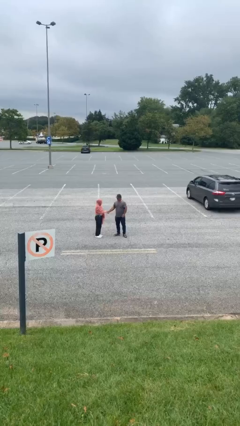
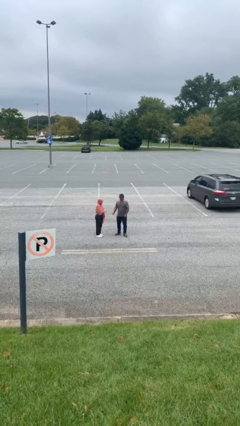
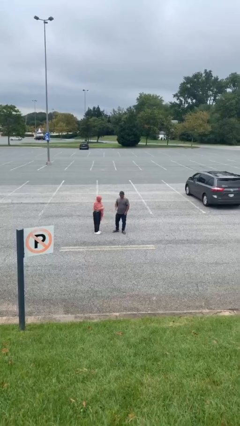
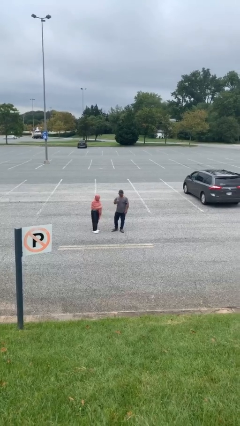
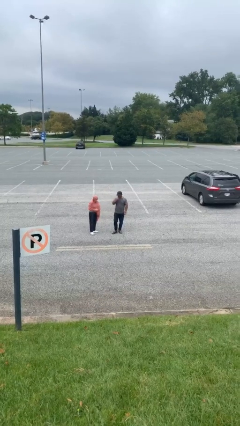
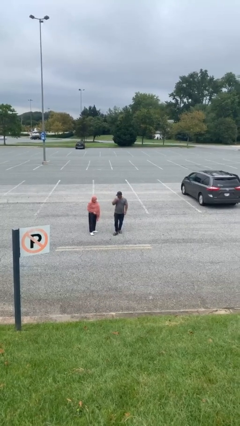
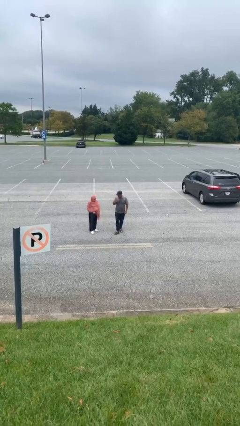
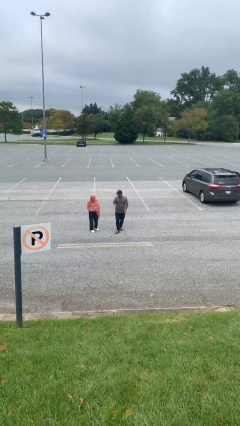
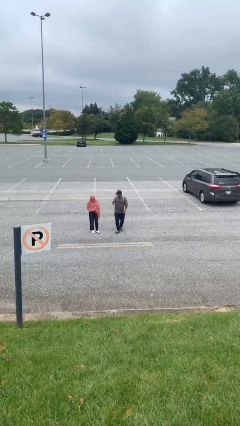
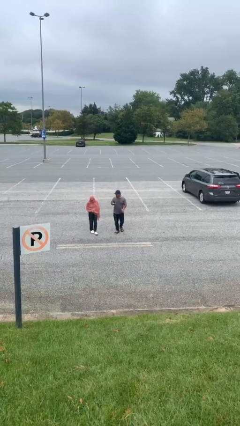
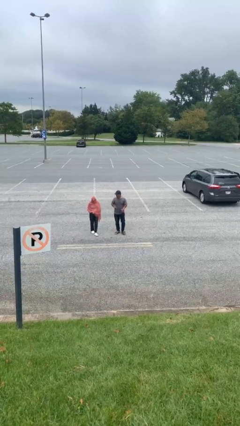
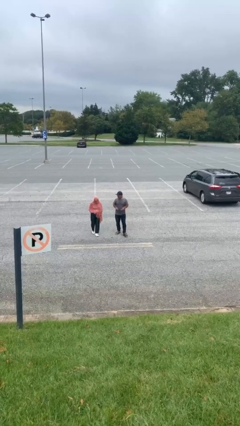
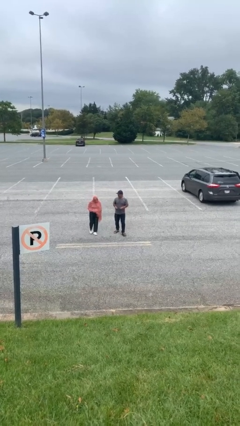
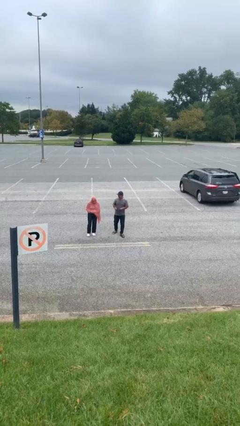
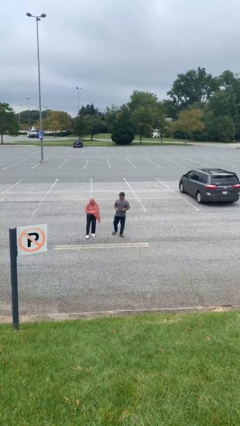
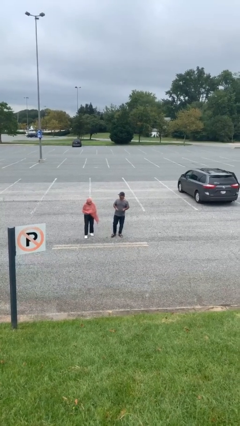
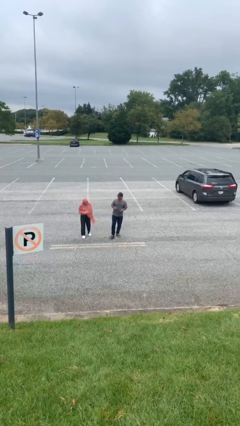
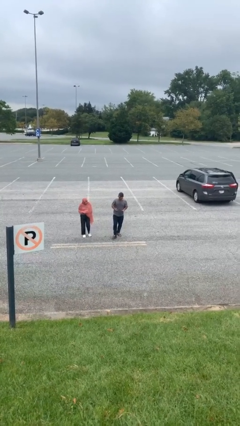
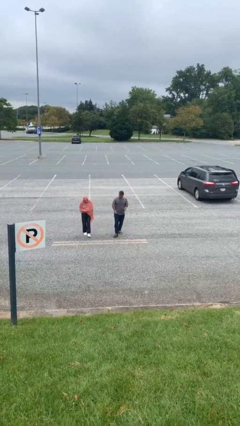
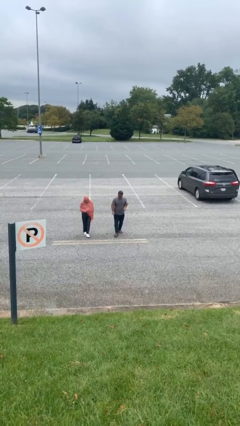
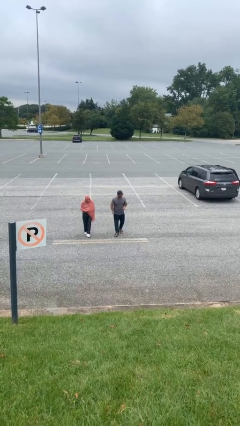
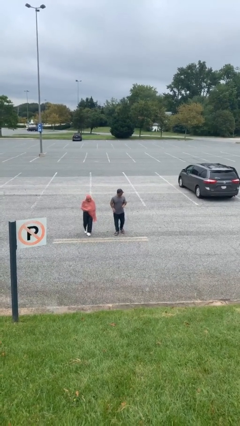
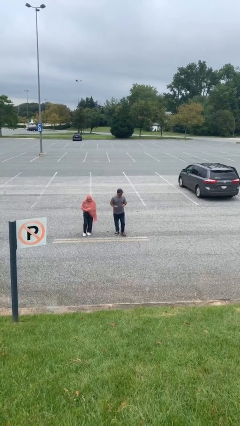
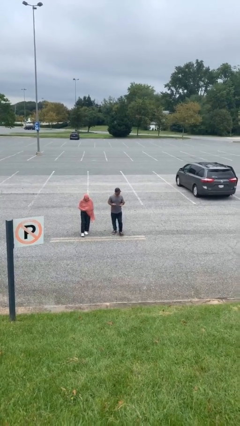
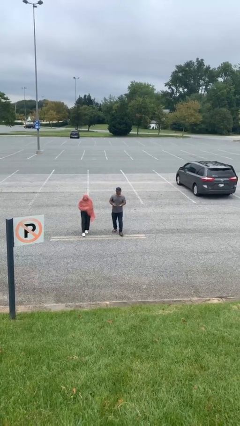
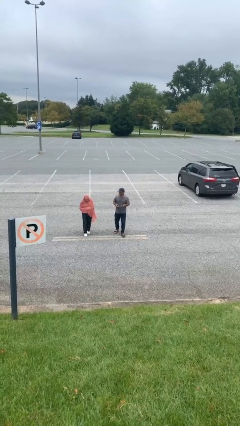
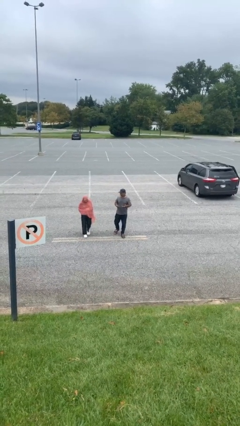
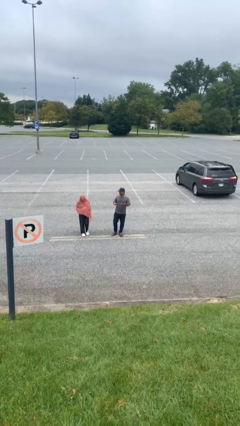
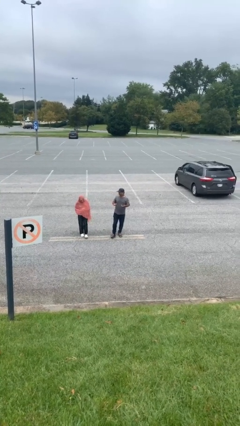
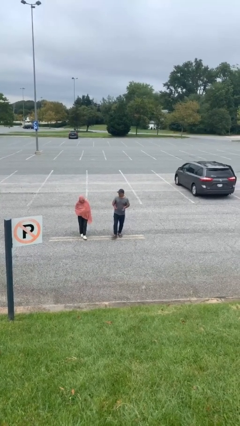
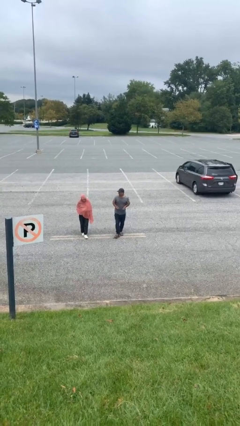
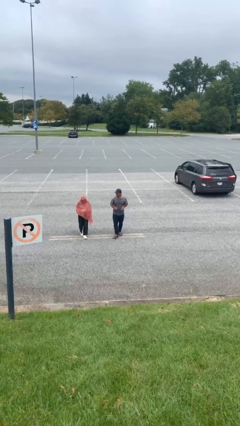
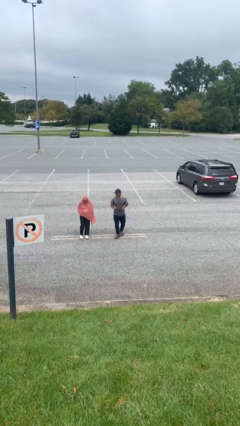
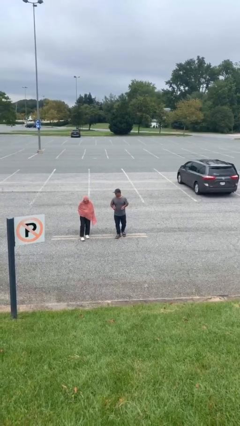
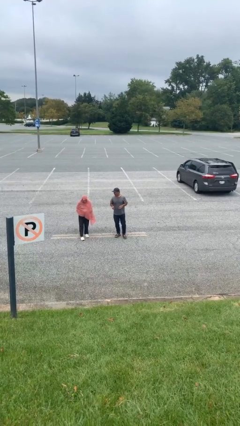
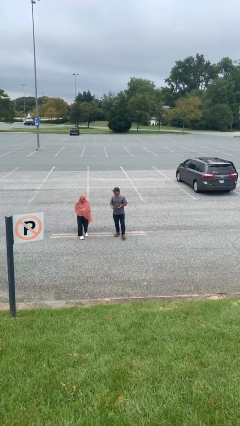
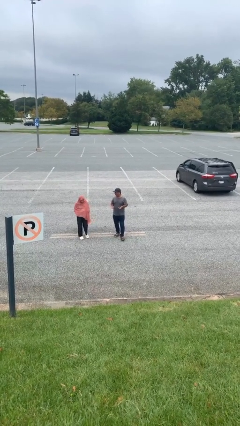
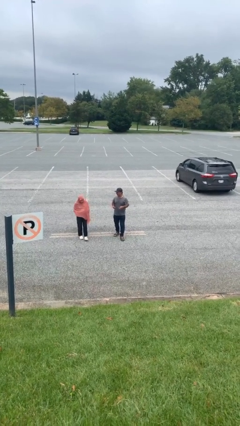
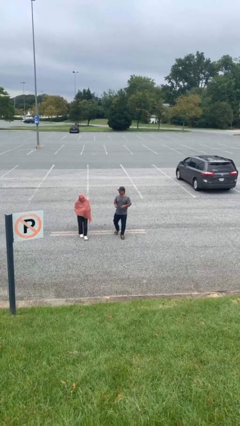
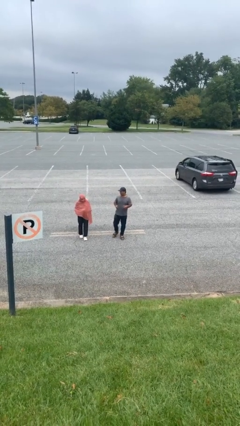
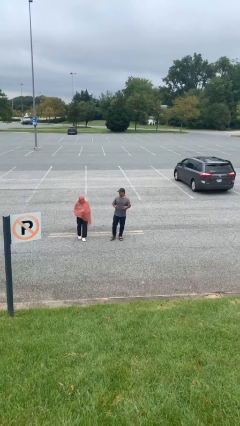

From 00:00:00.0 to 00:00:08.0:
person talks to person

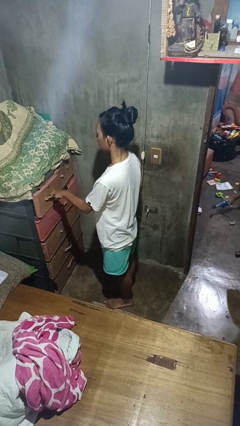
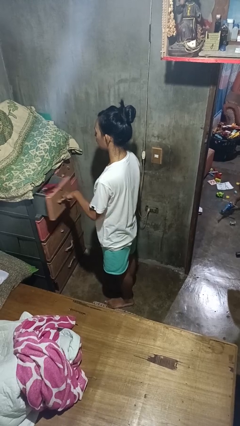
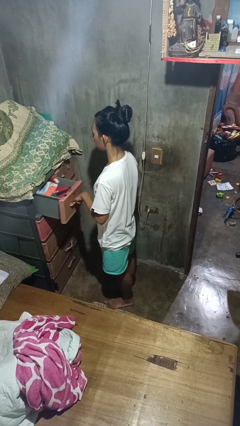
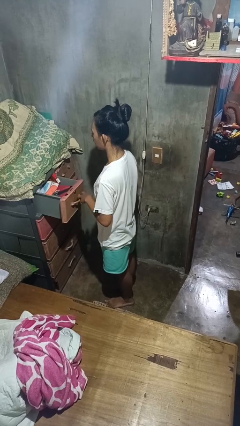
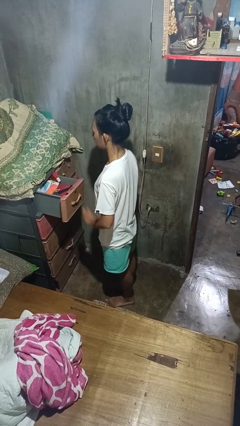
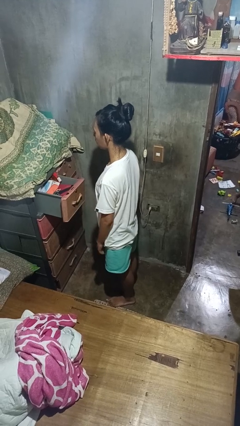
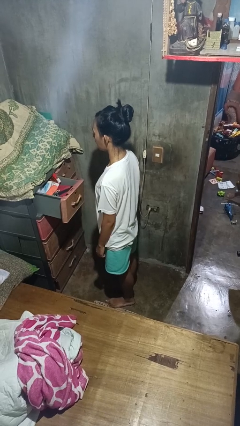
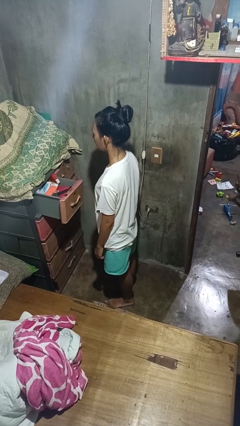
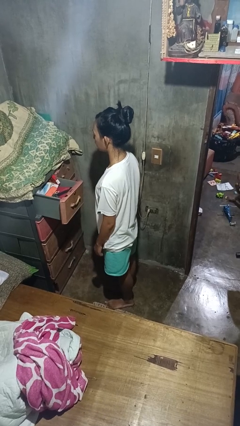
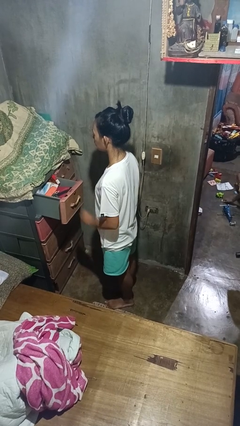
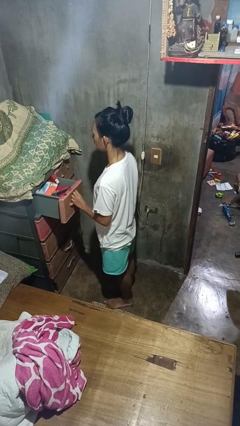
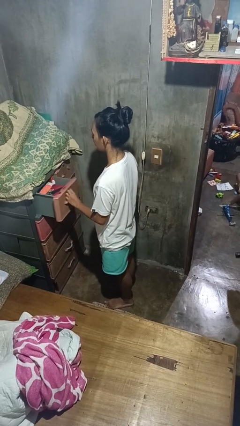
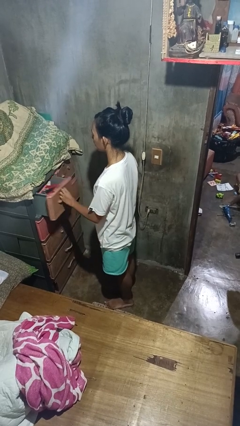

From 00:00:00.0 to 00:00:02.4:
person opens dresser drawer

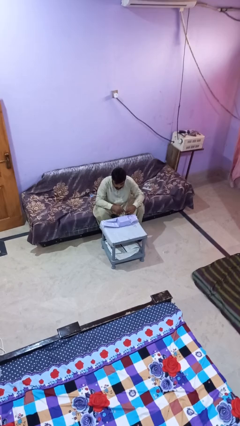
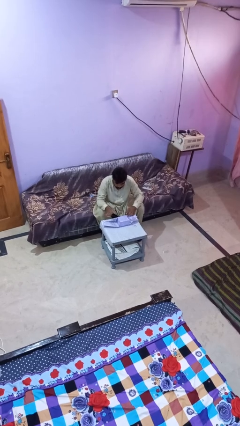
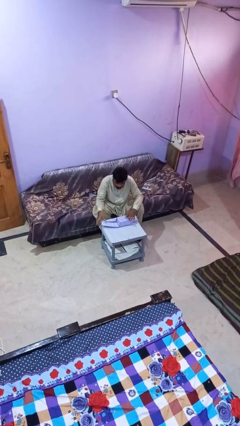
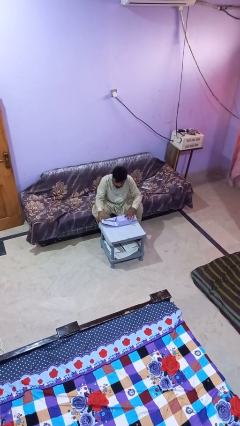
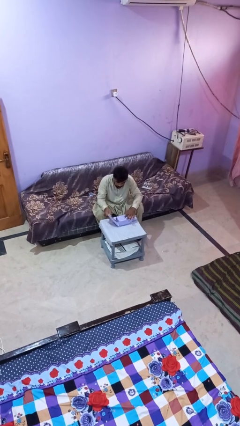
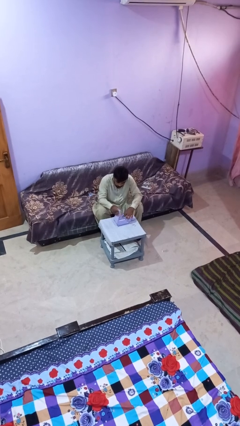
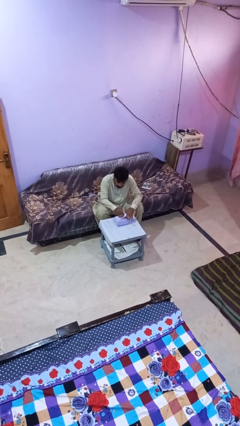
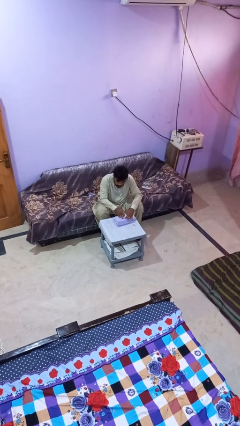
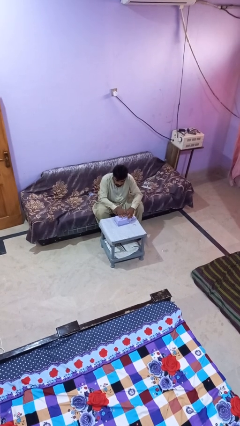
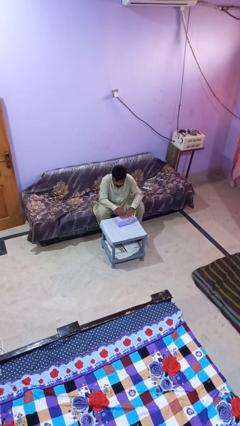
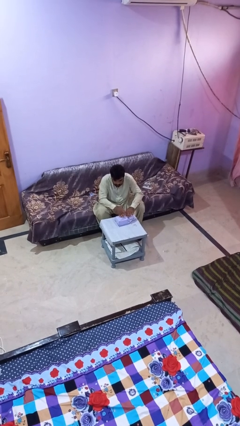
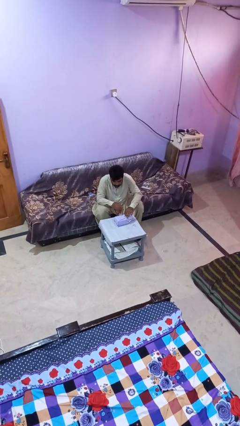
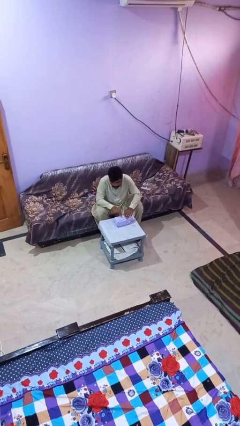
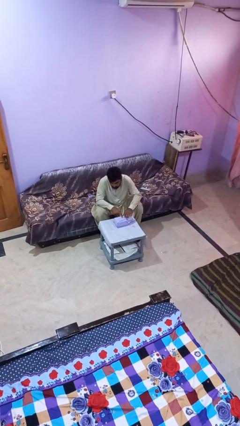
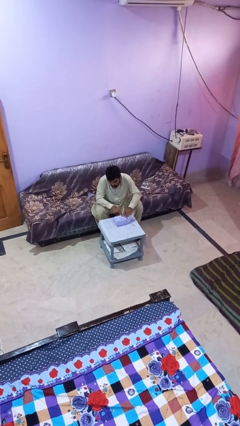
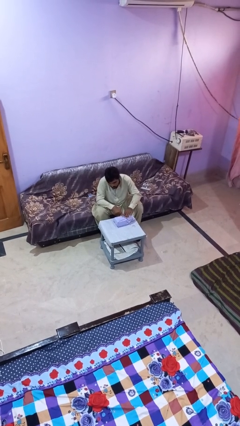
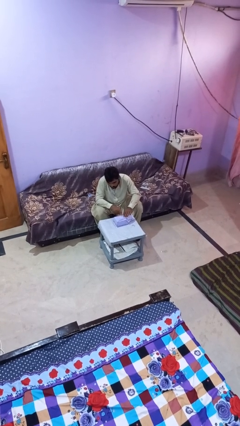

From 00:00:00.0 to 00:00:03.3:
person wraps box

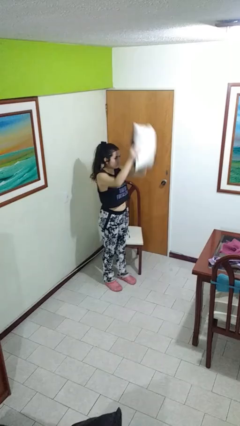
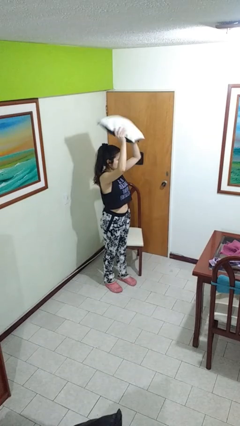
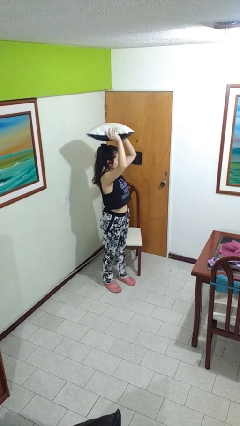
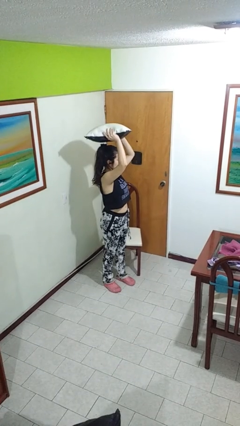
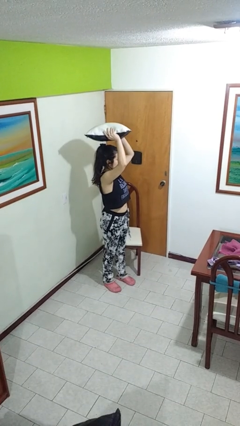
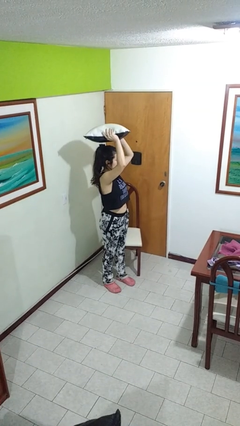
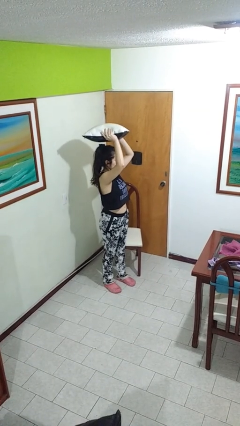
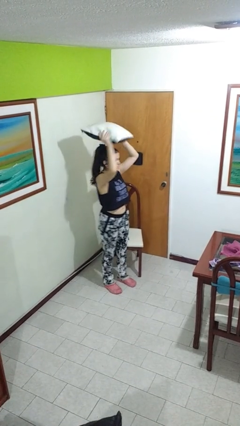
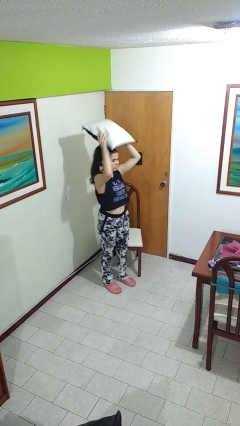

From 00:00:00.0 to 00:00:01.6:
person holds object above head

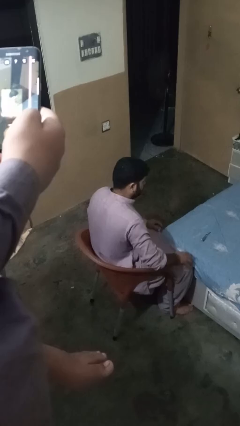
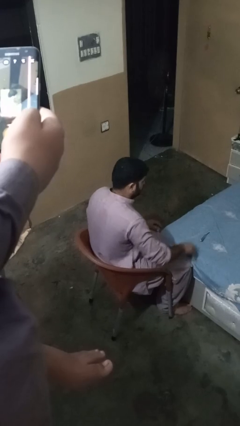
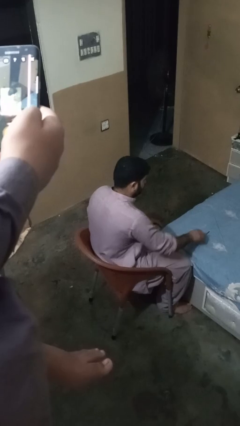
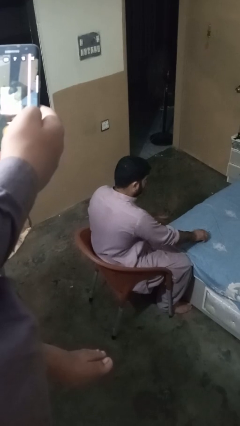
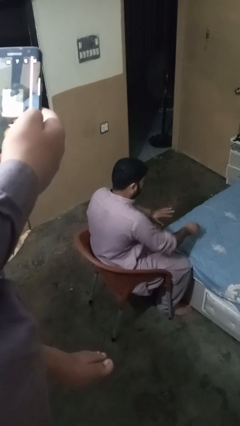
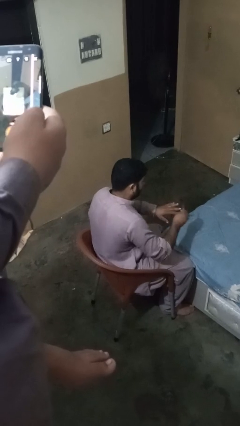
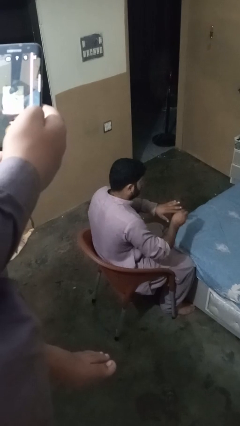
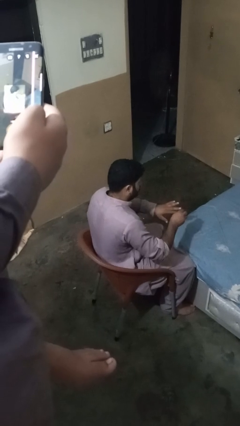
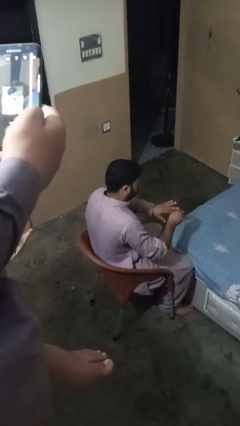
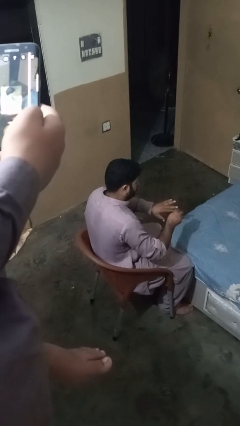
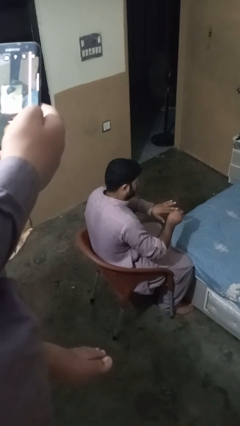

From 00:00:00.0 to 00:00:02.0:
person files fingernails

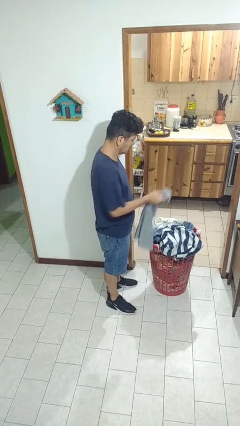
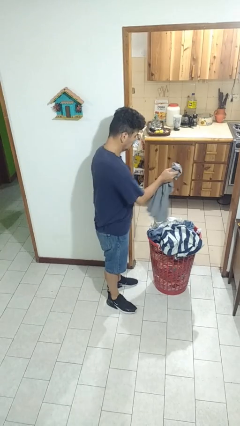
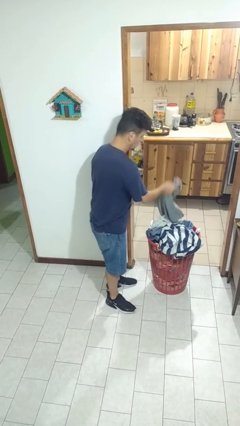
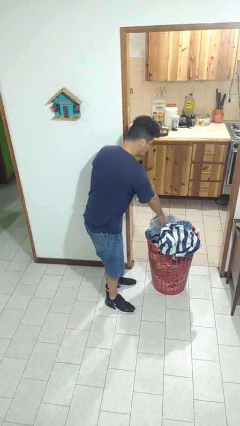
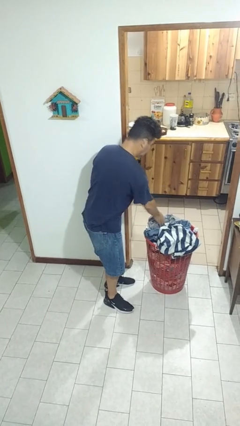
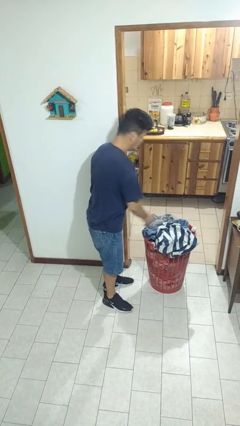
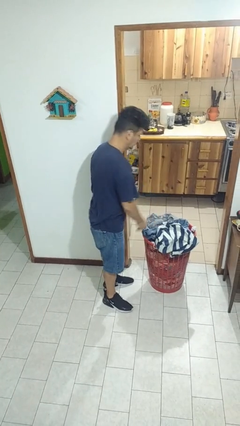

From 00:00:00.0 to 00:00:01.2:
person puts object into basket
